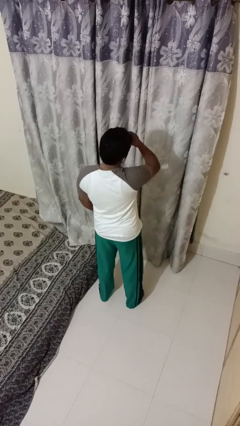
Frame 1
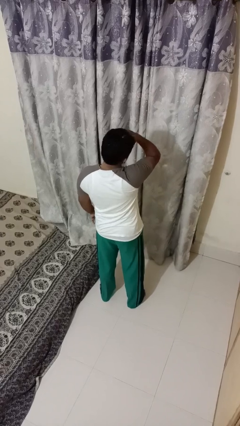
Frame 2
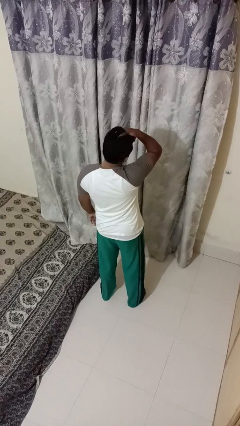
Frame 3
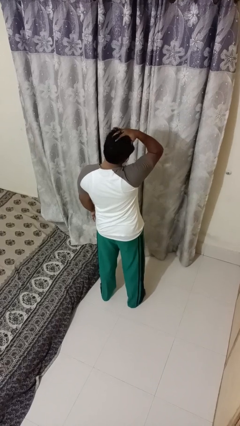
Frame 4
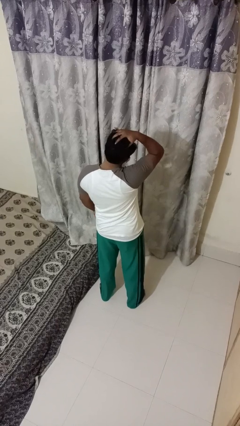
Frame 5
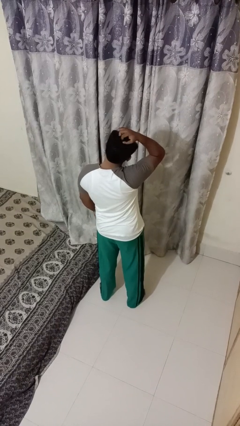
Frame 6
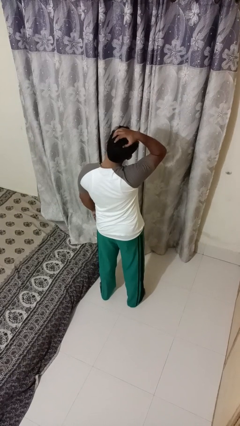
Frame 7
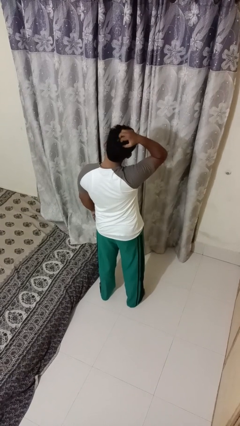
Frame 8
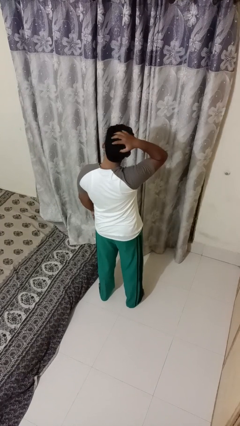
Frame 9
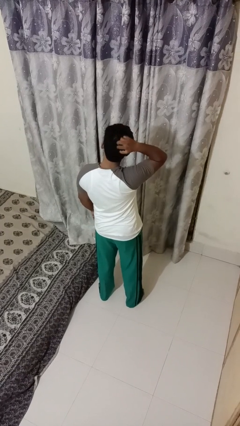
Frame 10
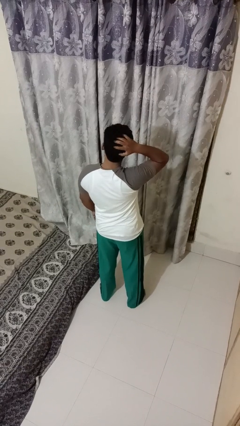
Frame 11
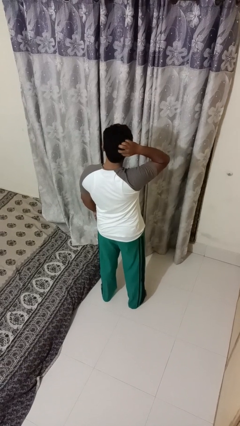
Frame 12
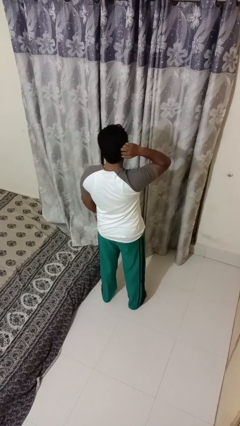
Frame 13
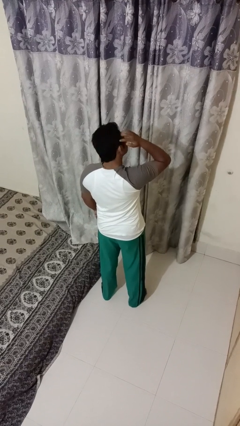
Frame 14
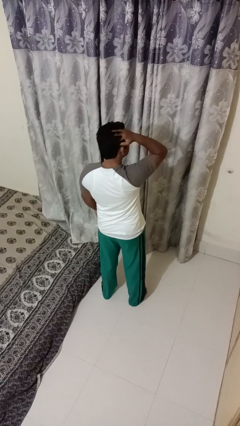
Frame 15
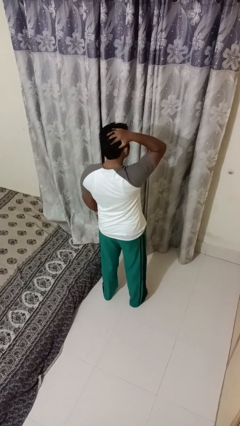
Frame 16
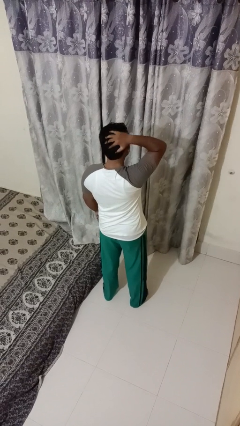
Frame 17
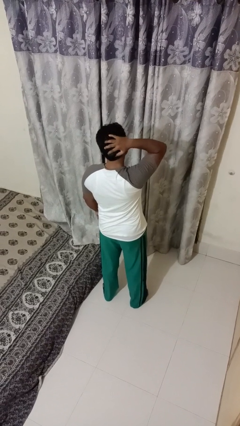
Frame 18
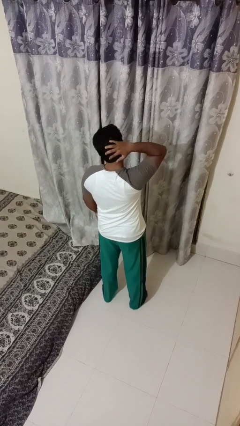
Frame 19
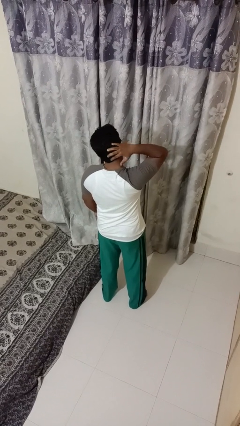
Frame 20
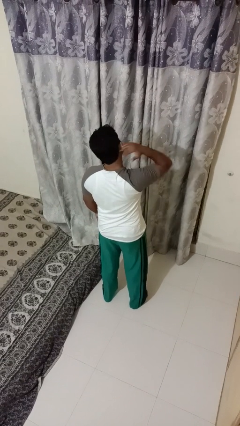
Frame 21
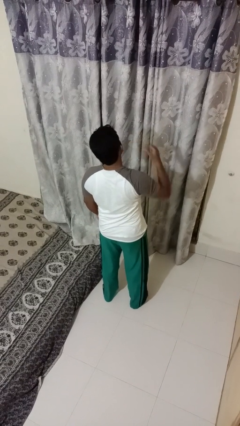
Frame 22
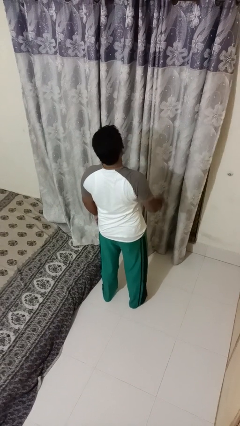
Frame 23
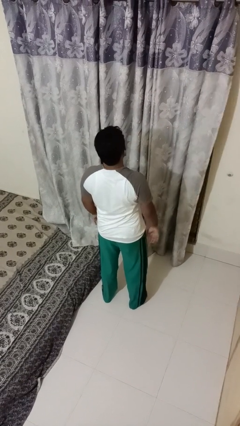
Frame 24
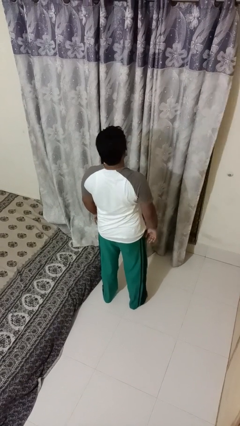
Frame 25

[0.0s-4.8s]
person strokes hair

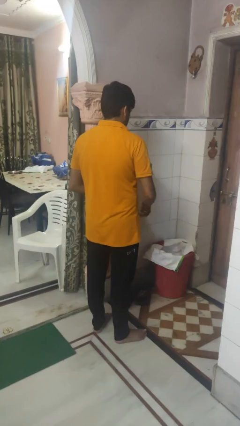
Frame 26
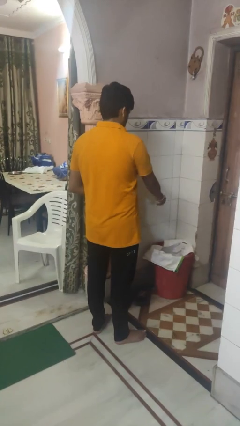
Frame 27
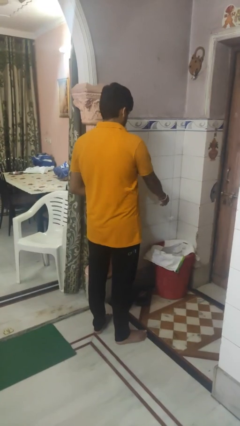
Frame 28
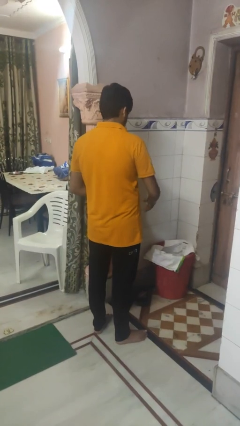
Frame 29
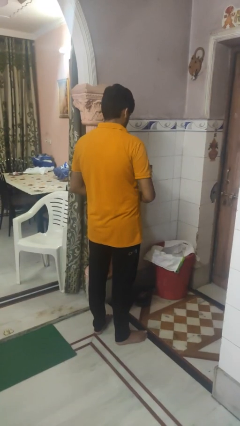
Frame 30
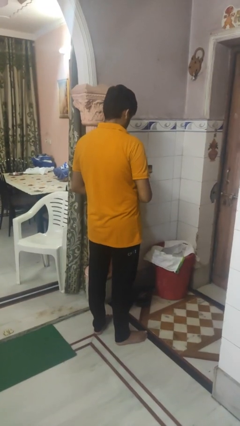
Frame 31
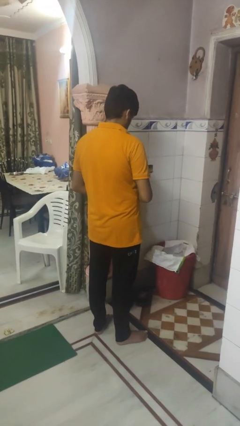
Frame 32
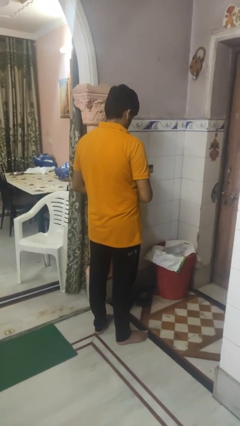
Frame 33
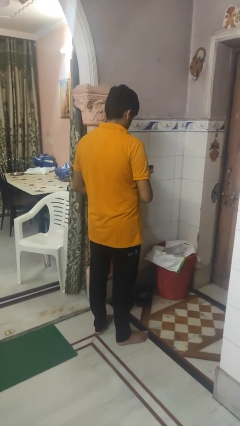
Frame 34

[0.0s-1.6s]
person discards trash

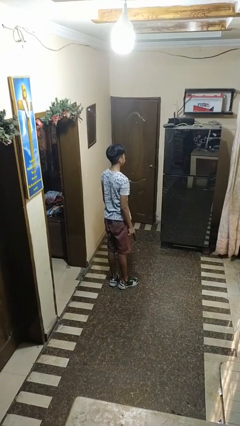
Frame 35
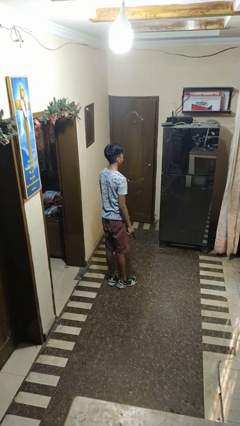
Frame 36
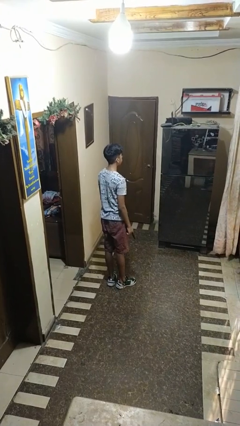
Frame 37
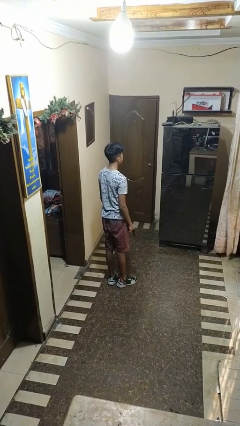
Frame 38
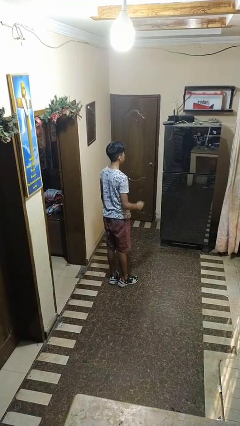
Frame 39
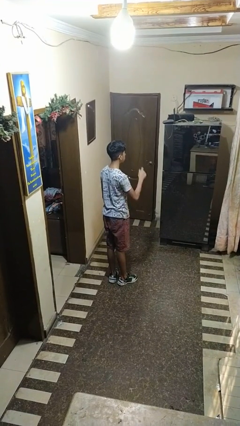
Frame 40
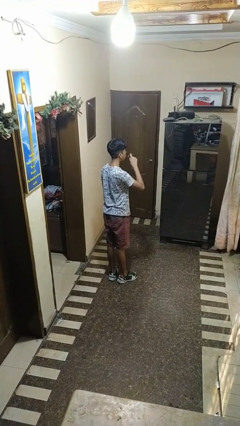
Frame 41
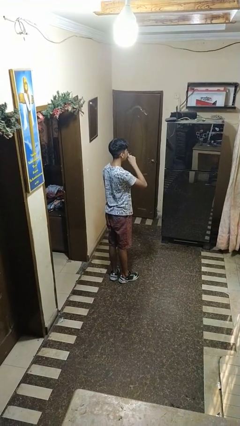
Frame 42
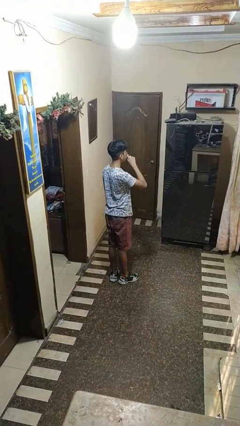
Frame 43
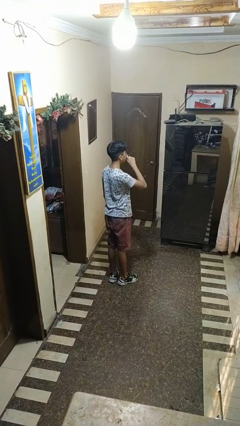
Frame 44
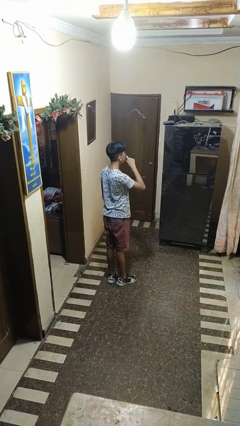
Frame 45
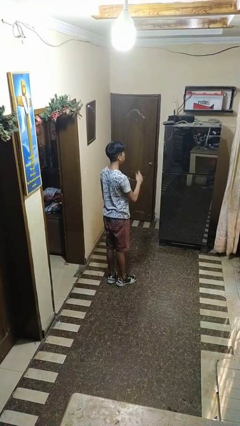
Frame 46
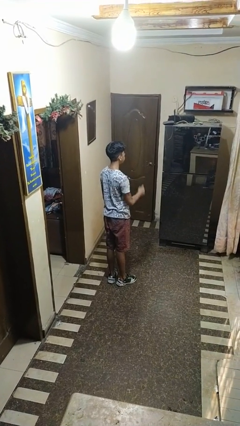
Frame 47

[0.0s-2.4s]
person vapes

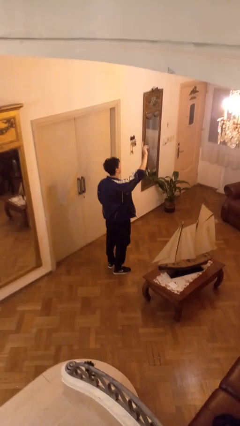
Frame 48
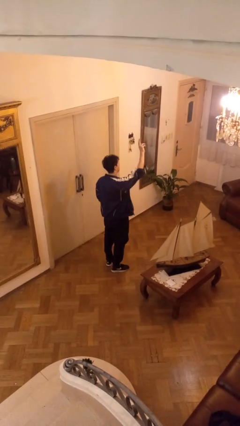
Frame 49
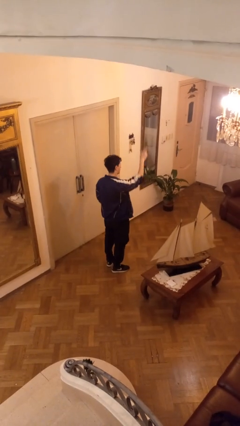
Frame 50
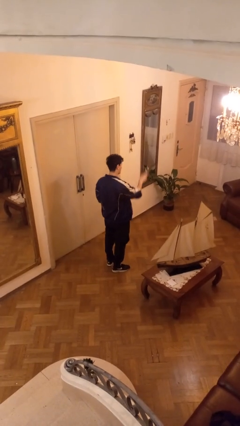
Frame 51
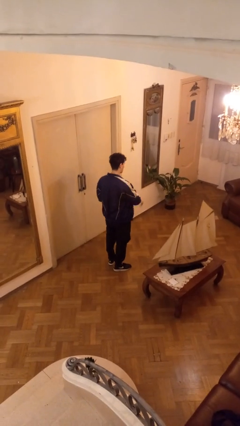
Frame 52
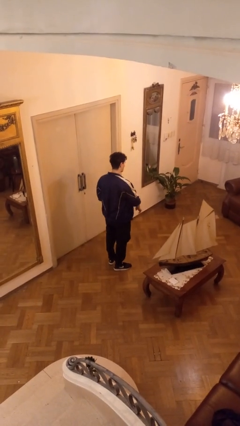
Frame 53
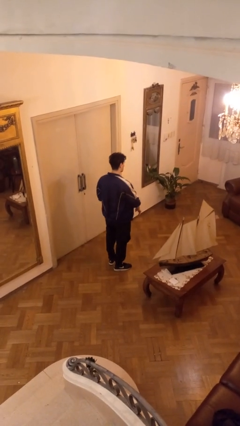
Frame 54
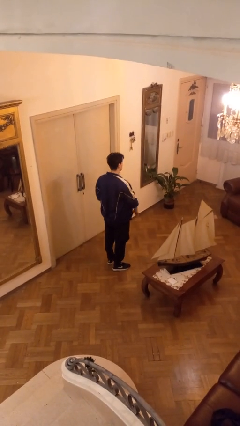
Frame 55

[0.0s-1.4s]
person gestures swipe down

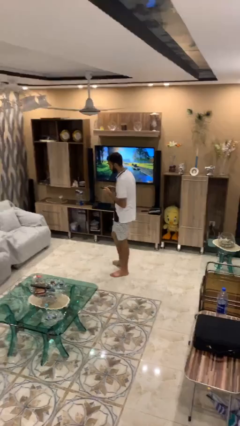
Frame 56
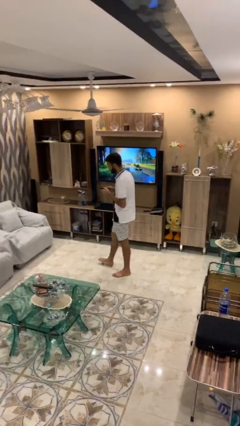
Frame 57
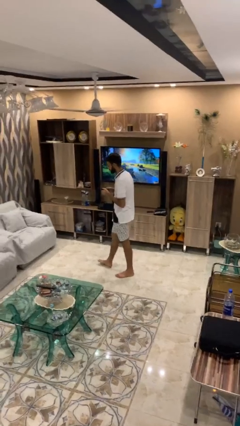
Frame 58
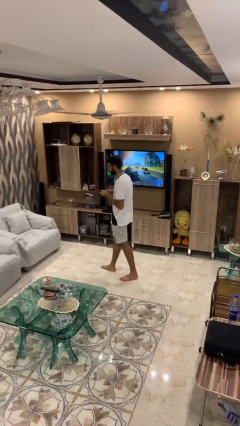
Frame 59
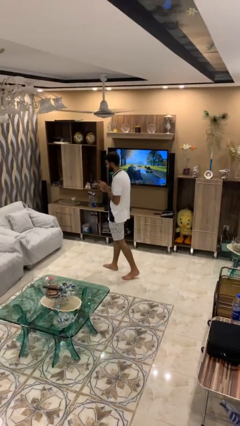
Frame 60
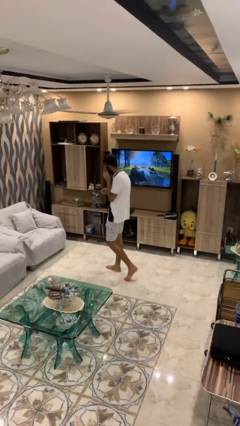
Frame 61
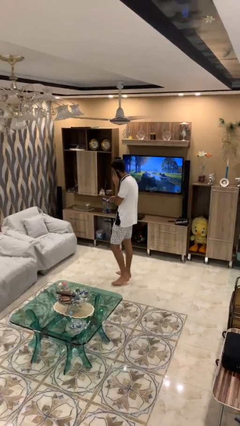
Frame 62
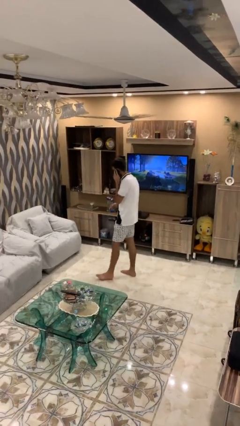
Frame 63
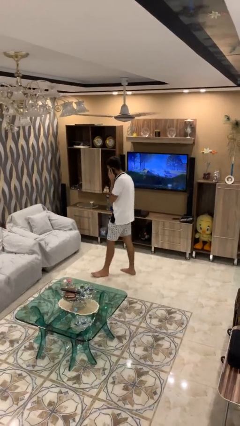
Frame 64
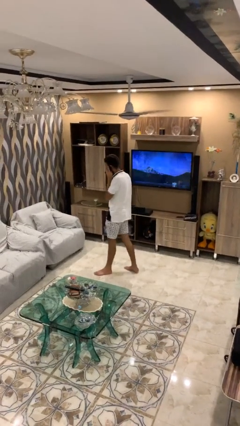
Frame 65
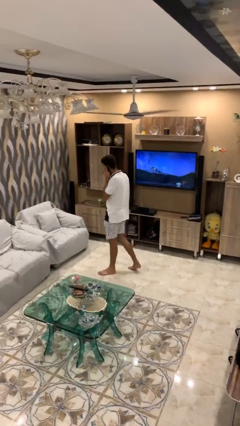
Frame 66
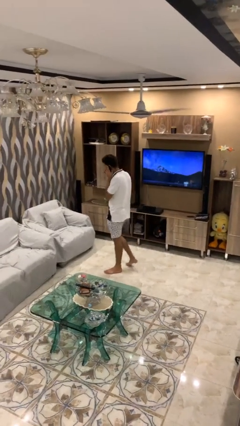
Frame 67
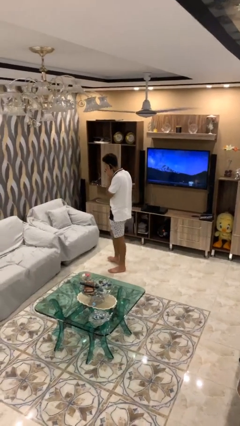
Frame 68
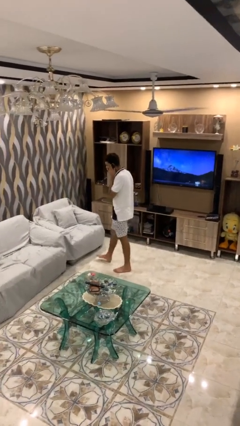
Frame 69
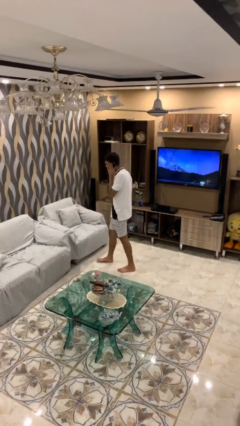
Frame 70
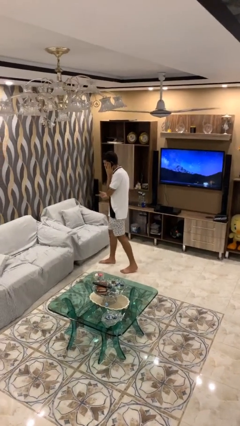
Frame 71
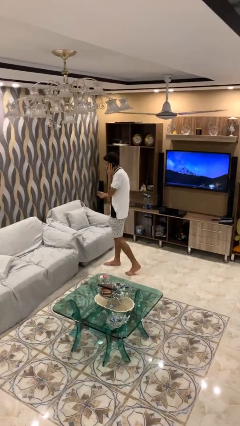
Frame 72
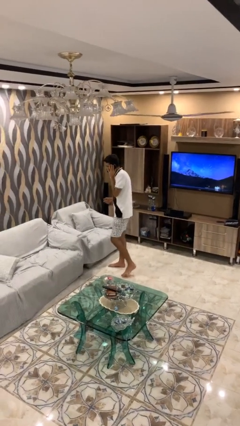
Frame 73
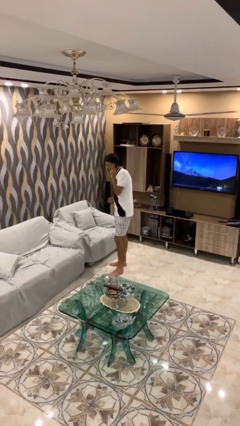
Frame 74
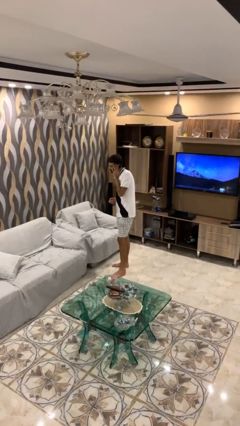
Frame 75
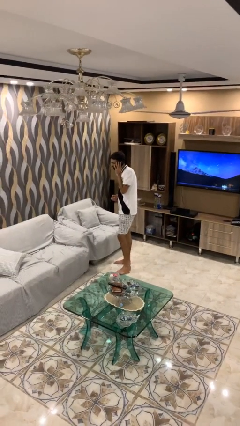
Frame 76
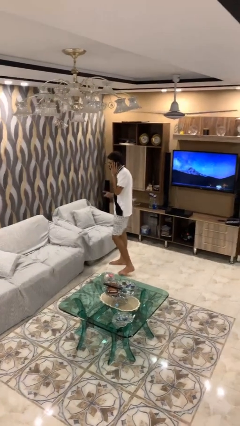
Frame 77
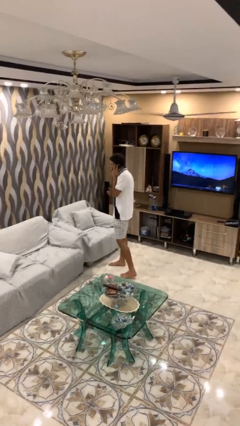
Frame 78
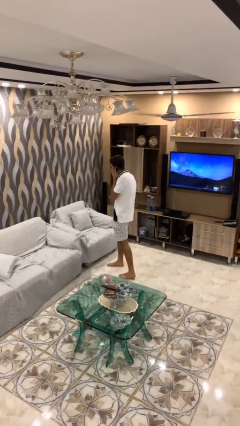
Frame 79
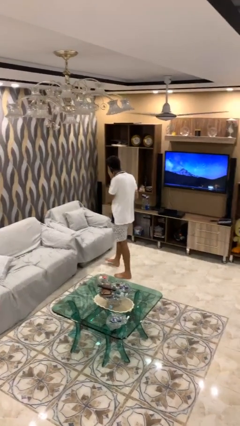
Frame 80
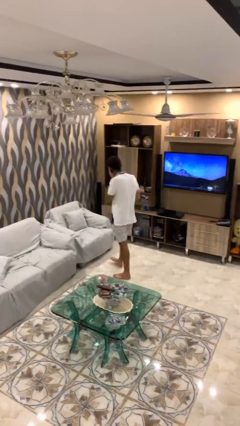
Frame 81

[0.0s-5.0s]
person talks on phone

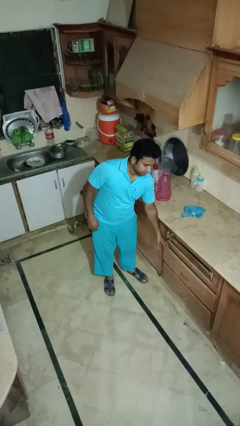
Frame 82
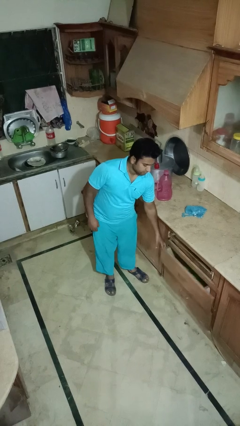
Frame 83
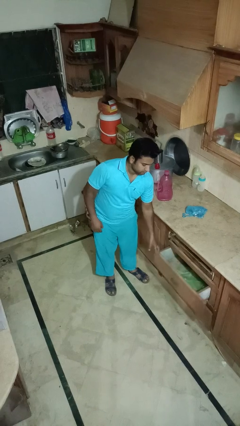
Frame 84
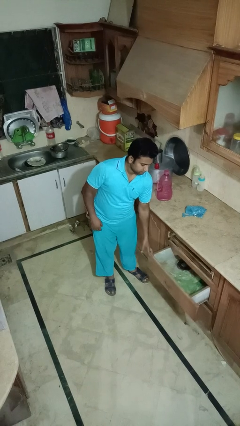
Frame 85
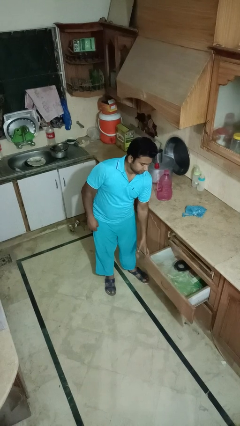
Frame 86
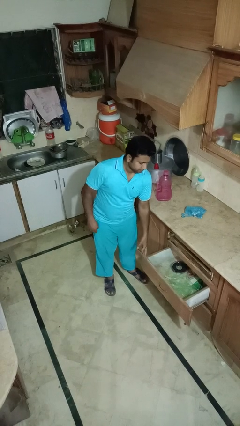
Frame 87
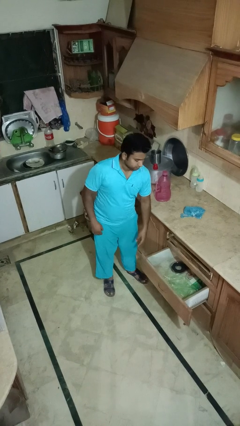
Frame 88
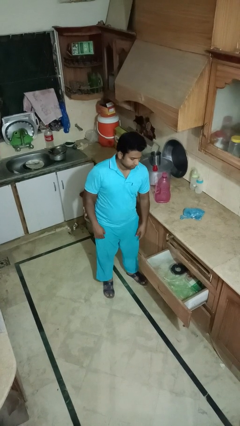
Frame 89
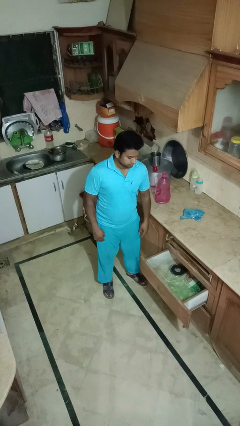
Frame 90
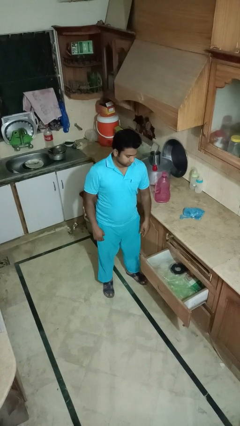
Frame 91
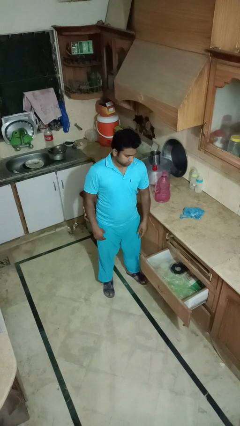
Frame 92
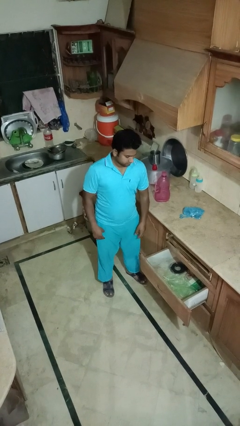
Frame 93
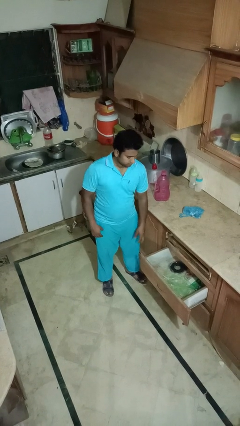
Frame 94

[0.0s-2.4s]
person opens kitchen drawer

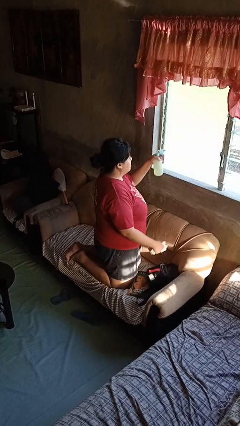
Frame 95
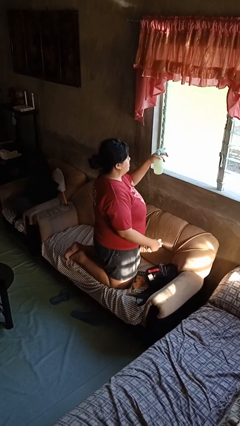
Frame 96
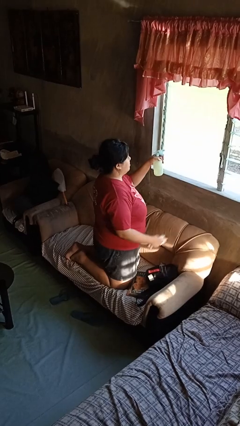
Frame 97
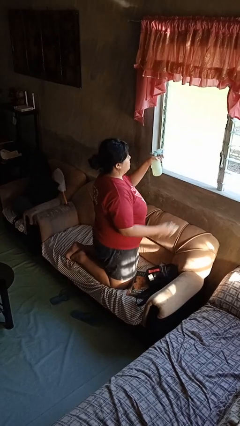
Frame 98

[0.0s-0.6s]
person sprays from bottle
